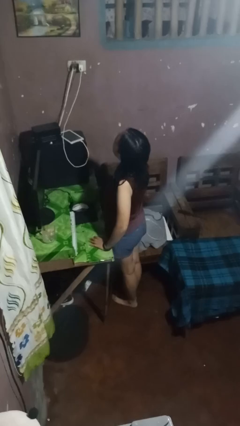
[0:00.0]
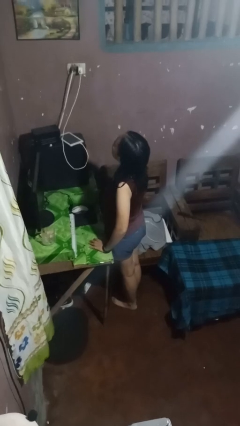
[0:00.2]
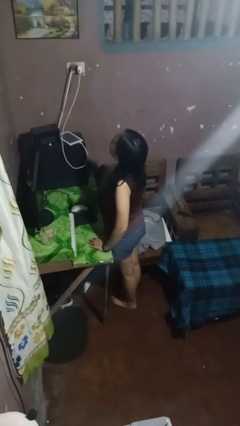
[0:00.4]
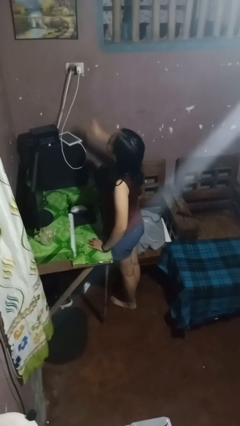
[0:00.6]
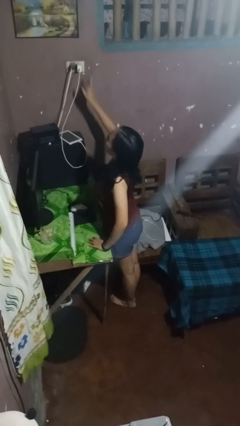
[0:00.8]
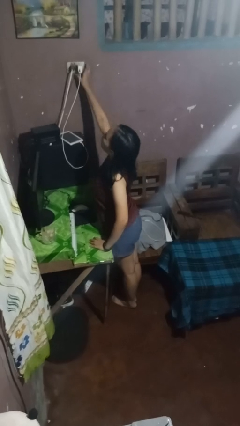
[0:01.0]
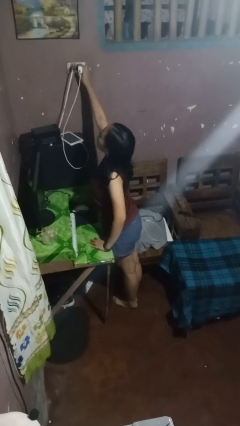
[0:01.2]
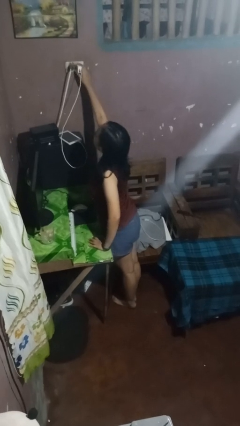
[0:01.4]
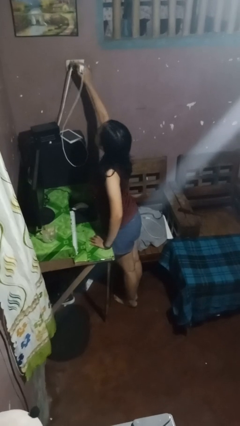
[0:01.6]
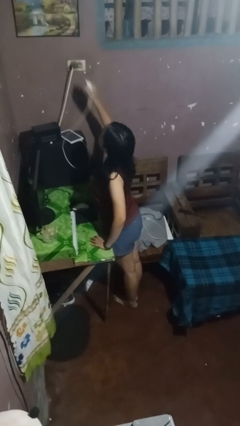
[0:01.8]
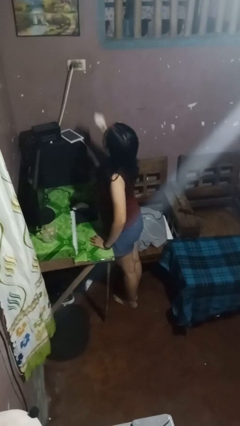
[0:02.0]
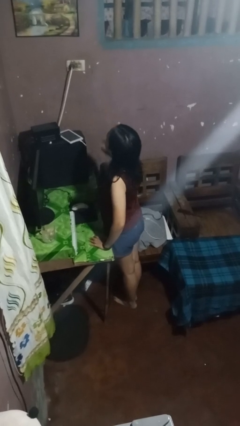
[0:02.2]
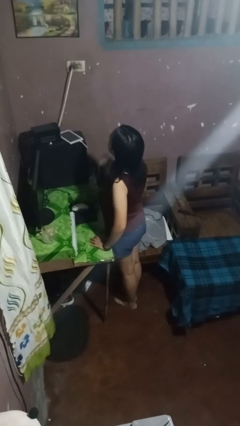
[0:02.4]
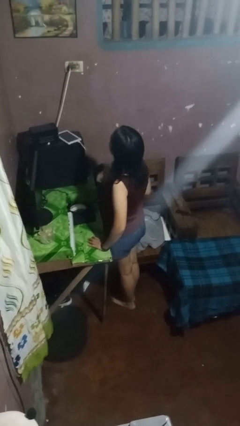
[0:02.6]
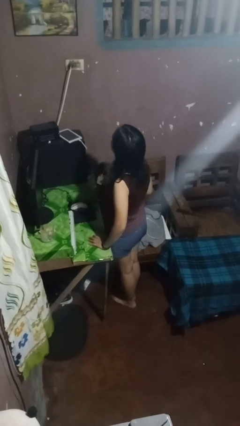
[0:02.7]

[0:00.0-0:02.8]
person unplugs from electrical socket

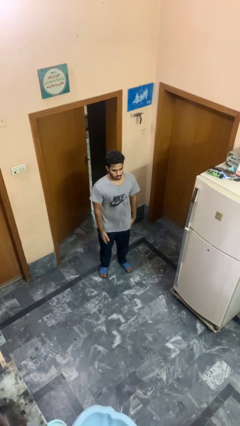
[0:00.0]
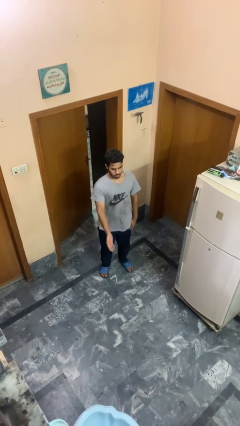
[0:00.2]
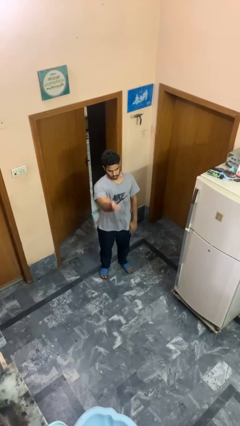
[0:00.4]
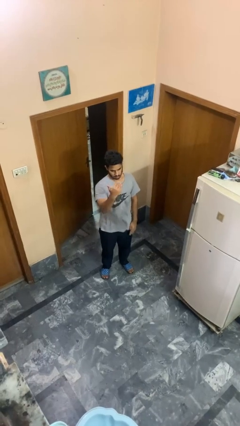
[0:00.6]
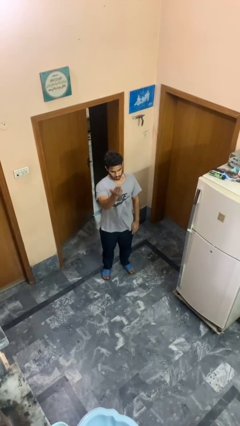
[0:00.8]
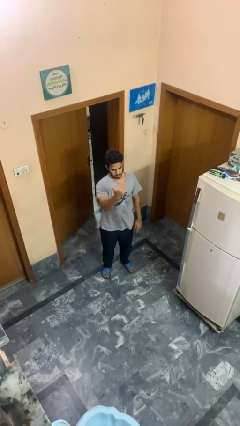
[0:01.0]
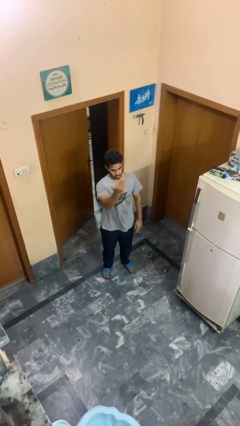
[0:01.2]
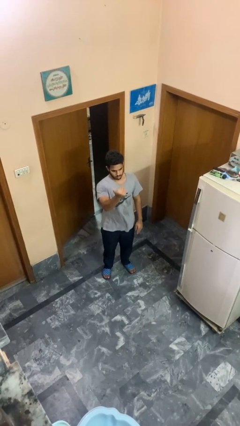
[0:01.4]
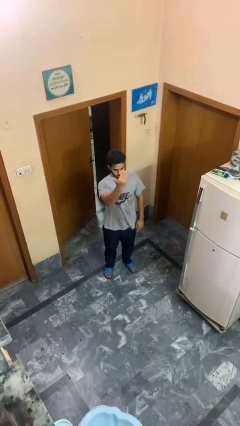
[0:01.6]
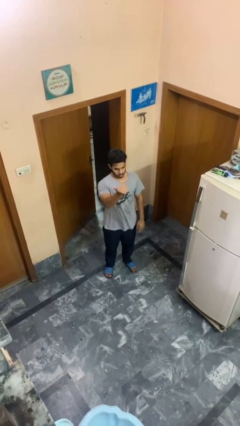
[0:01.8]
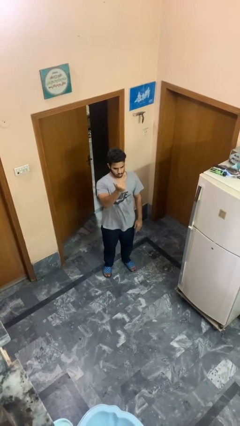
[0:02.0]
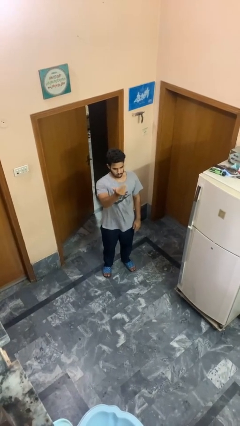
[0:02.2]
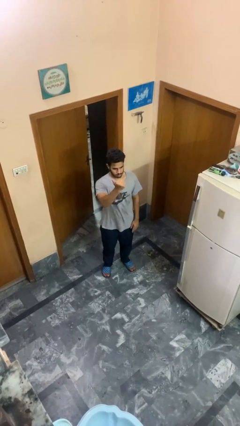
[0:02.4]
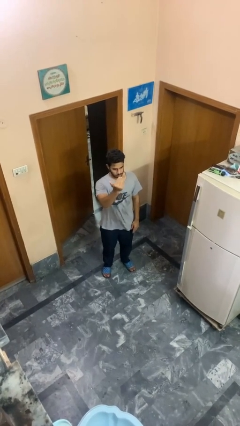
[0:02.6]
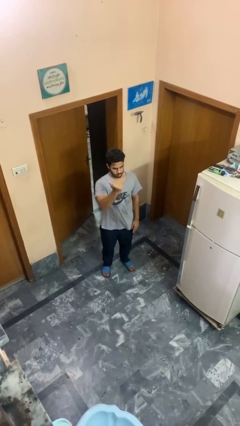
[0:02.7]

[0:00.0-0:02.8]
person gestures come here

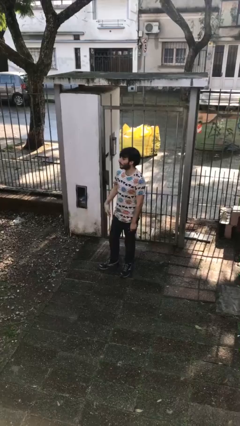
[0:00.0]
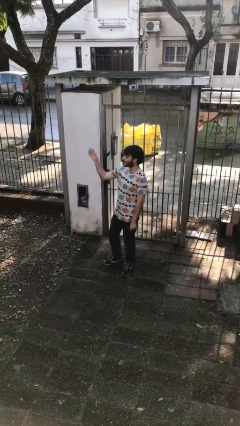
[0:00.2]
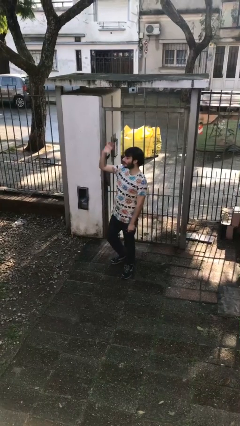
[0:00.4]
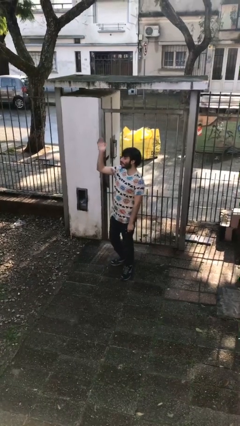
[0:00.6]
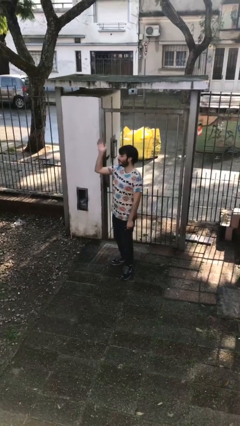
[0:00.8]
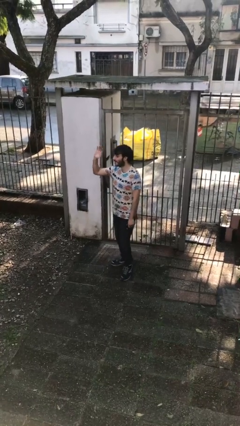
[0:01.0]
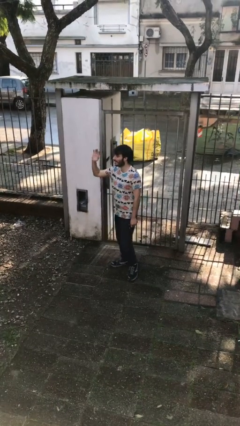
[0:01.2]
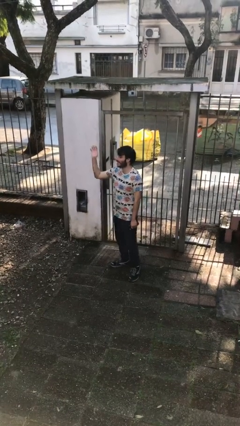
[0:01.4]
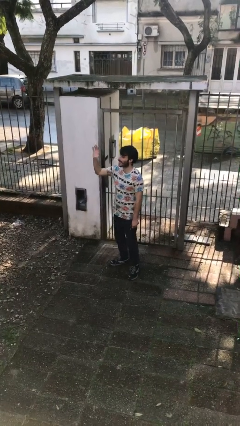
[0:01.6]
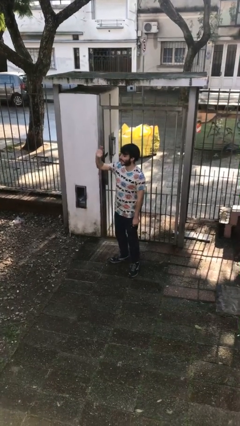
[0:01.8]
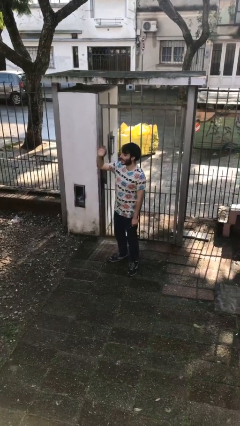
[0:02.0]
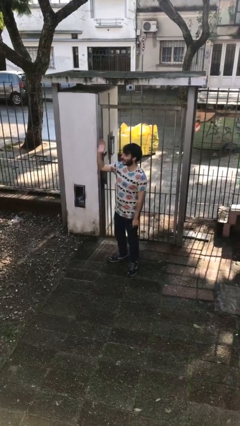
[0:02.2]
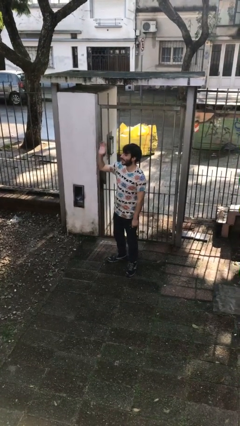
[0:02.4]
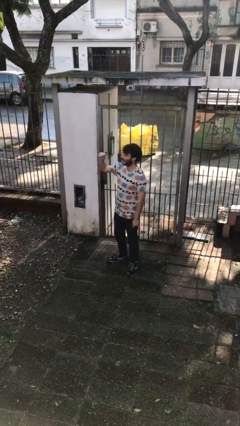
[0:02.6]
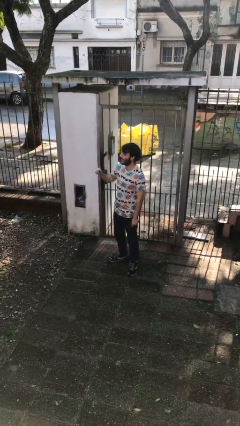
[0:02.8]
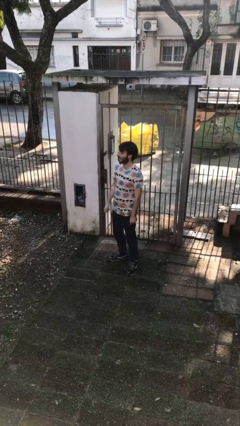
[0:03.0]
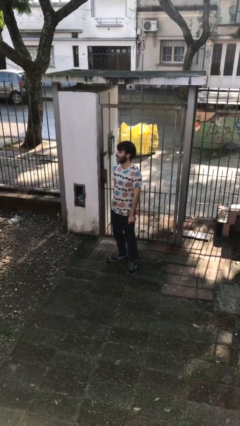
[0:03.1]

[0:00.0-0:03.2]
person waves at person

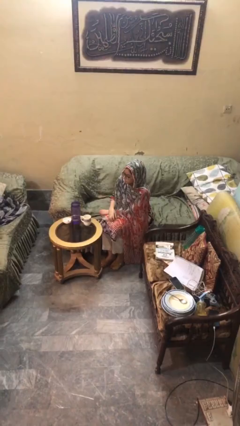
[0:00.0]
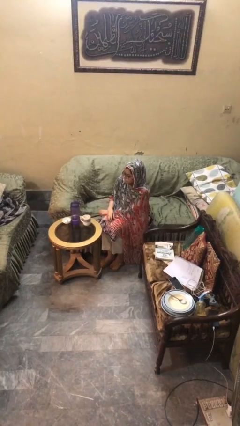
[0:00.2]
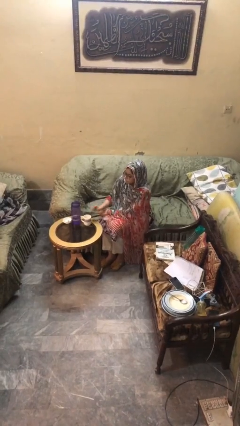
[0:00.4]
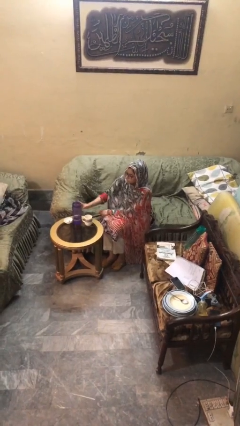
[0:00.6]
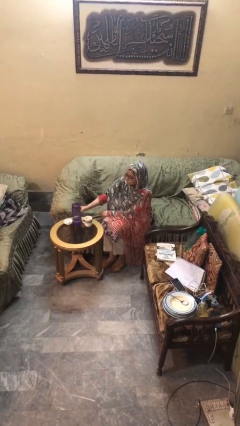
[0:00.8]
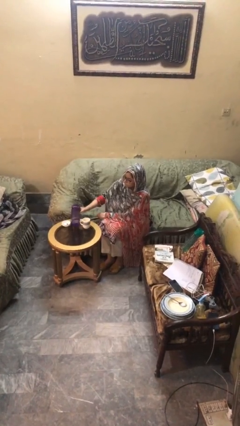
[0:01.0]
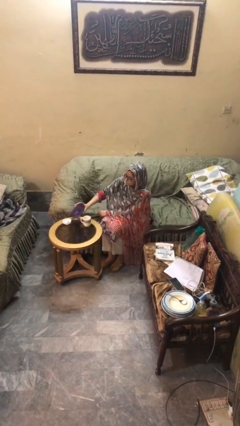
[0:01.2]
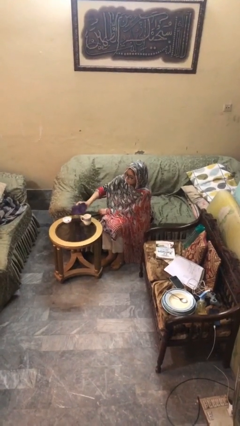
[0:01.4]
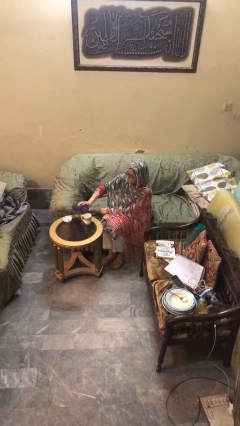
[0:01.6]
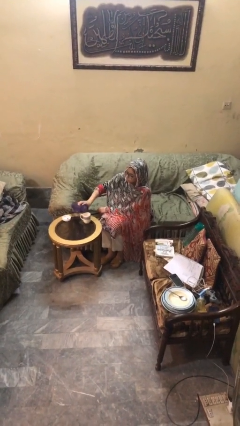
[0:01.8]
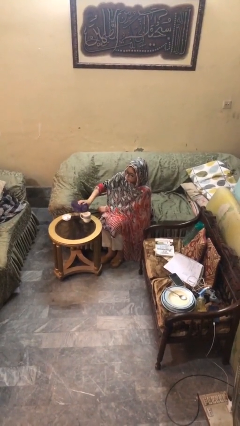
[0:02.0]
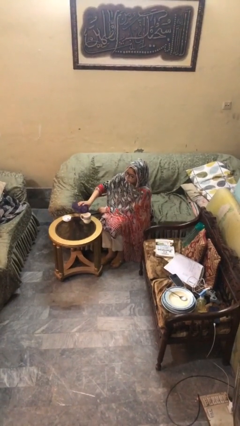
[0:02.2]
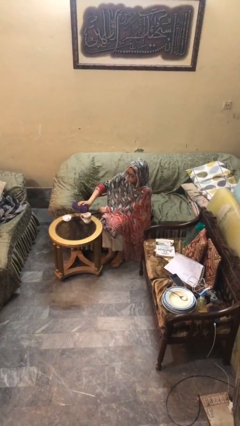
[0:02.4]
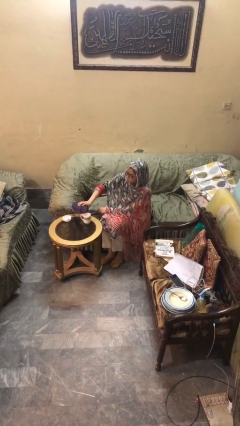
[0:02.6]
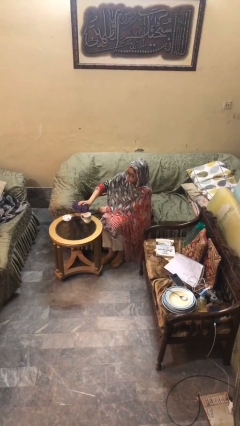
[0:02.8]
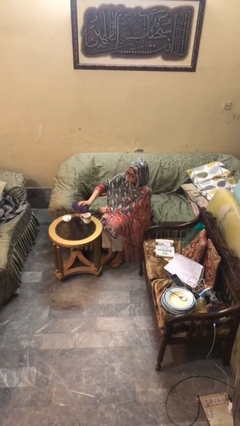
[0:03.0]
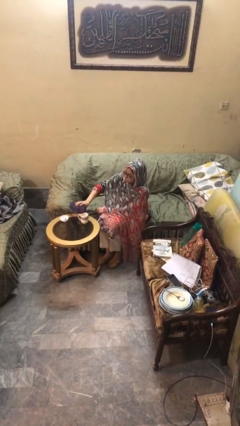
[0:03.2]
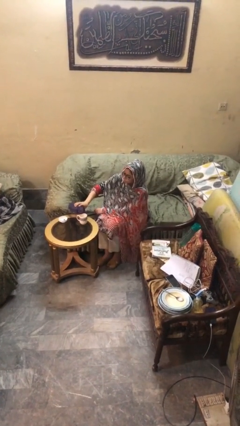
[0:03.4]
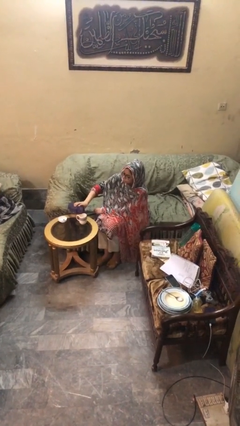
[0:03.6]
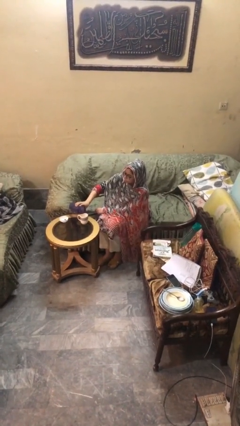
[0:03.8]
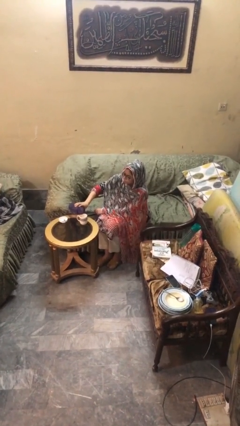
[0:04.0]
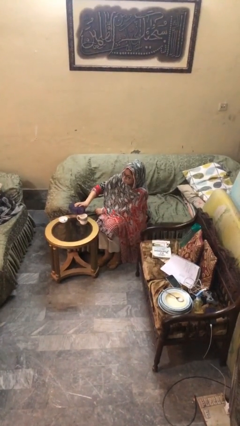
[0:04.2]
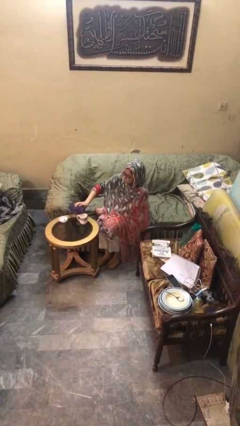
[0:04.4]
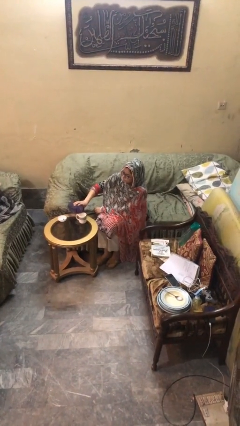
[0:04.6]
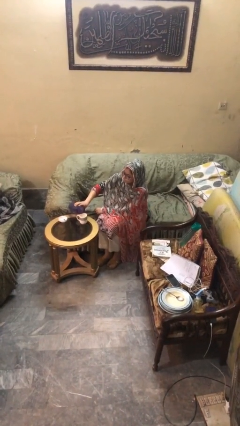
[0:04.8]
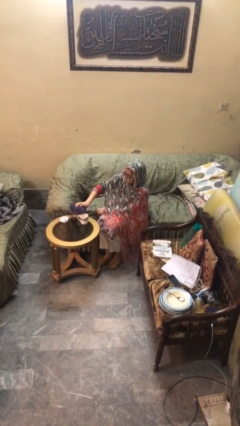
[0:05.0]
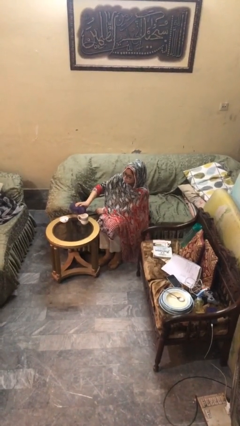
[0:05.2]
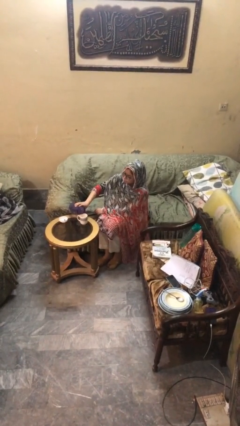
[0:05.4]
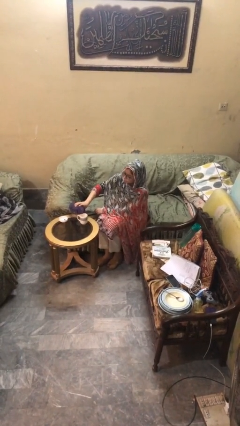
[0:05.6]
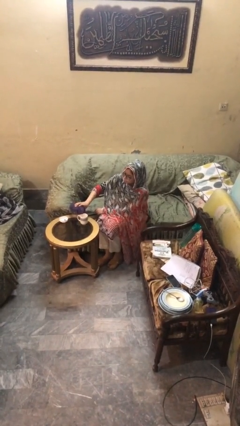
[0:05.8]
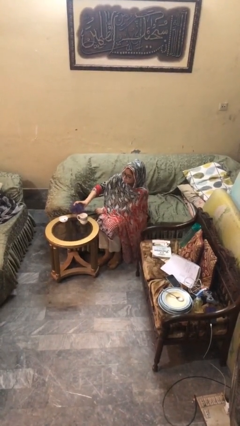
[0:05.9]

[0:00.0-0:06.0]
person pours liquid into cup

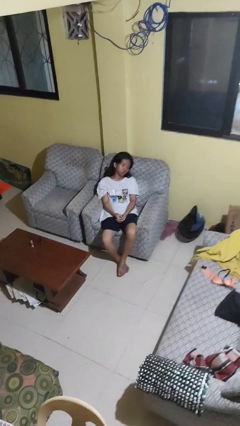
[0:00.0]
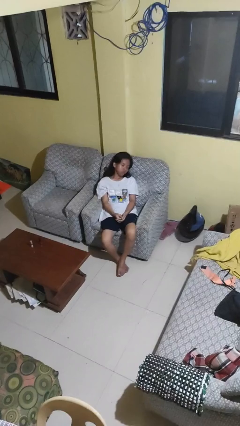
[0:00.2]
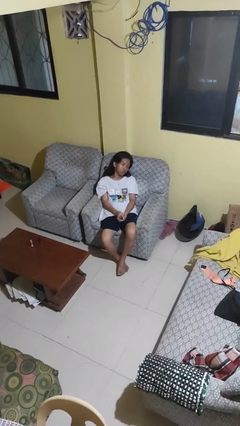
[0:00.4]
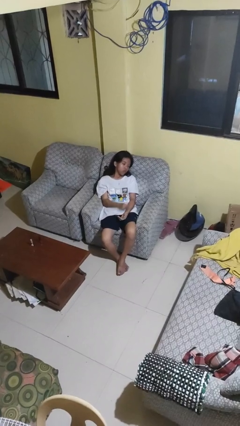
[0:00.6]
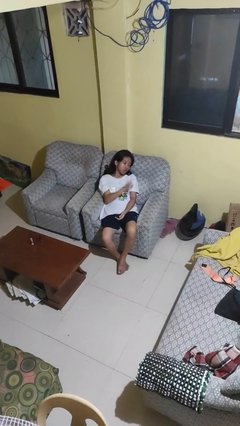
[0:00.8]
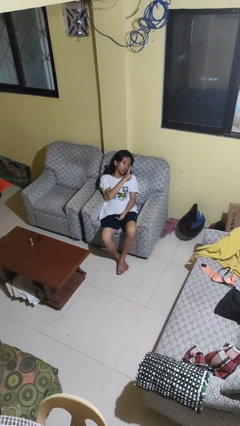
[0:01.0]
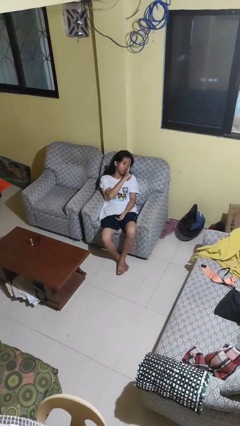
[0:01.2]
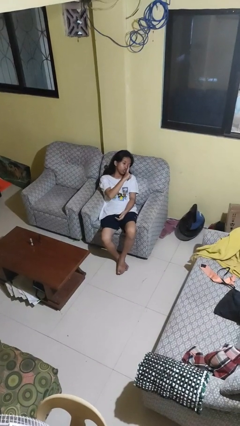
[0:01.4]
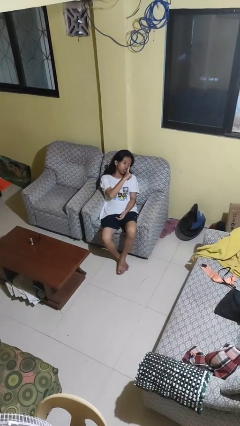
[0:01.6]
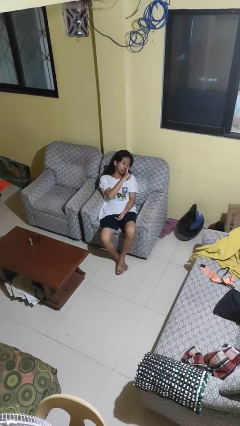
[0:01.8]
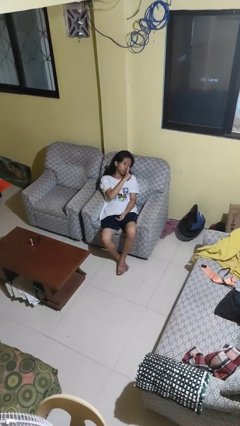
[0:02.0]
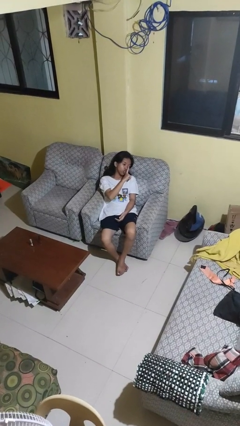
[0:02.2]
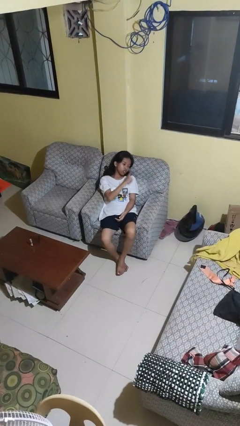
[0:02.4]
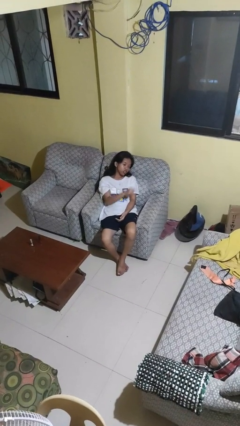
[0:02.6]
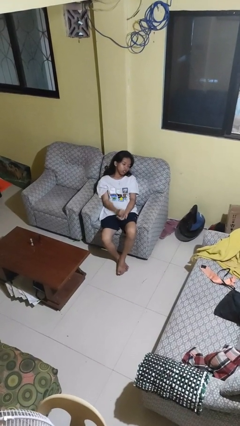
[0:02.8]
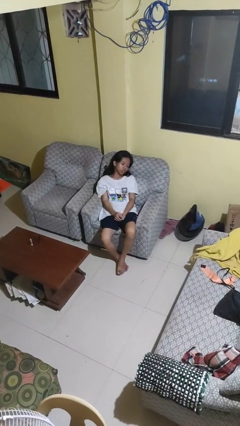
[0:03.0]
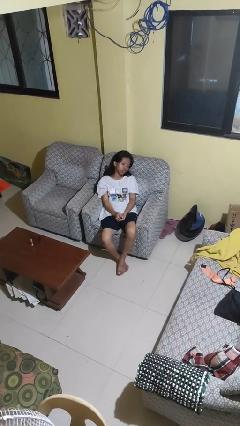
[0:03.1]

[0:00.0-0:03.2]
person gestures be quiet
